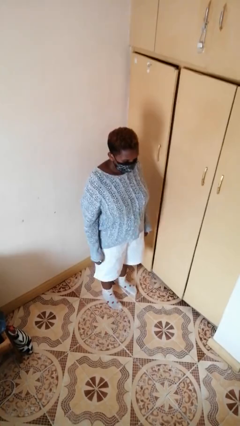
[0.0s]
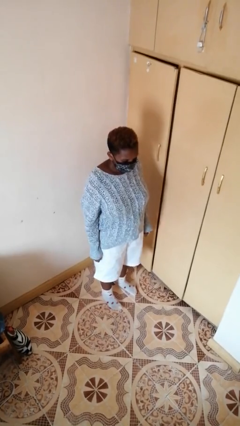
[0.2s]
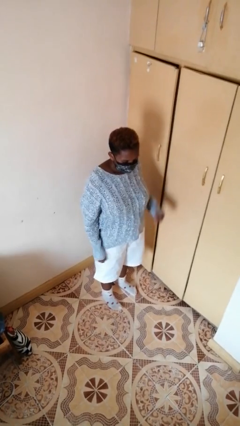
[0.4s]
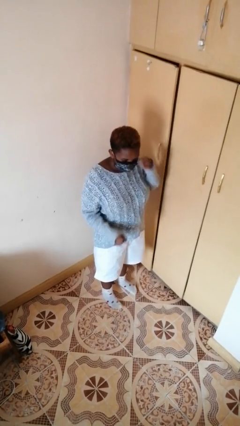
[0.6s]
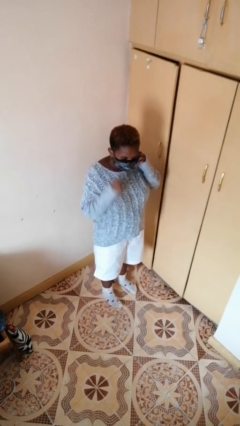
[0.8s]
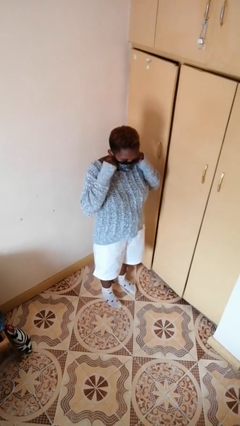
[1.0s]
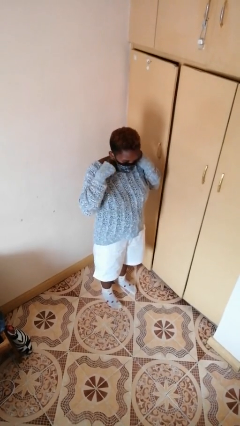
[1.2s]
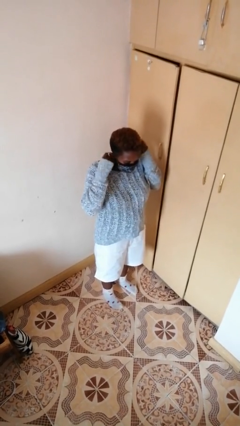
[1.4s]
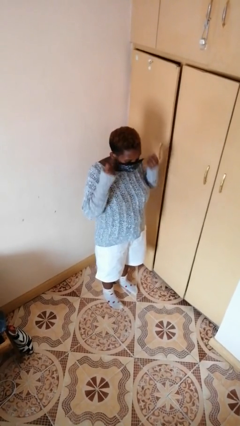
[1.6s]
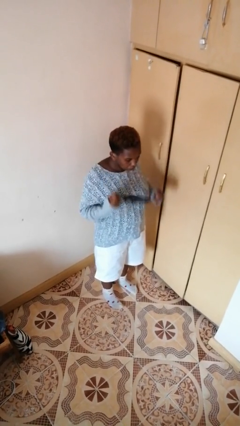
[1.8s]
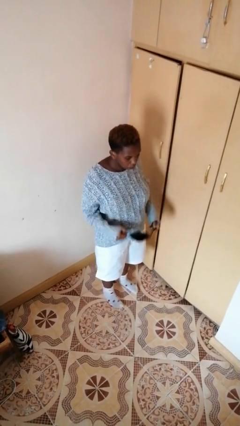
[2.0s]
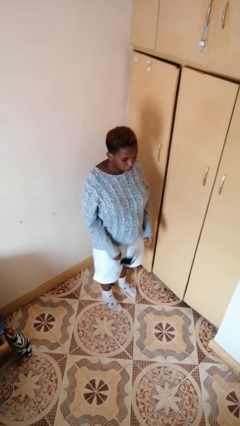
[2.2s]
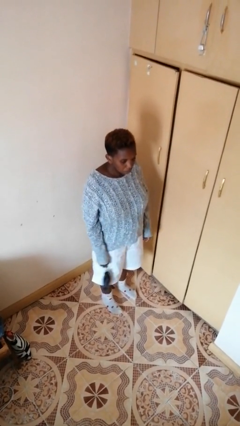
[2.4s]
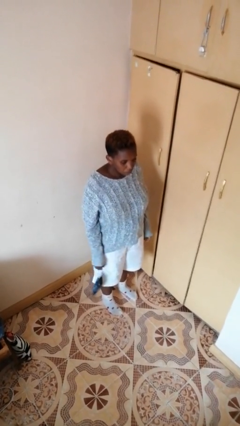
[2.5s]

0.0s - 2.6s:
person takes off facemask

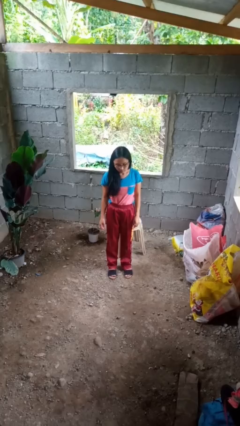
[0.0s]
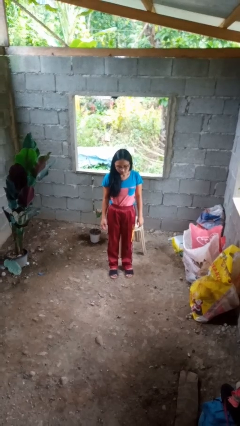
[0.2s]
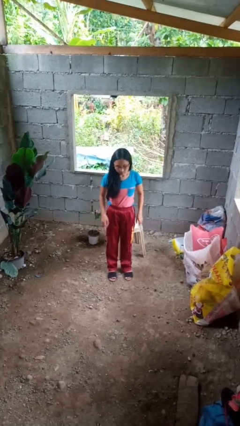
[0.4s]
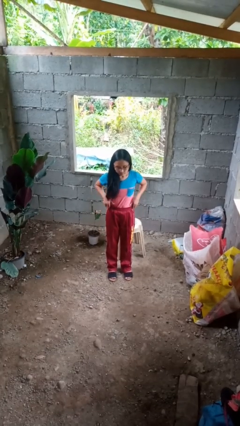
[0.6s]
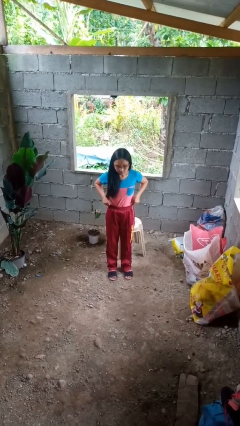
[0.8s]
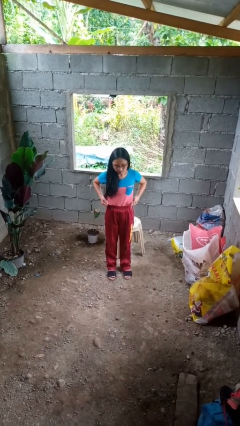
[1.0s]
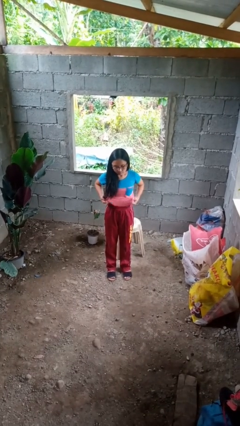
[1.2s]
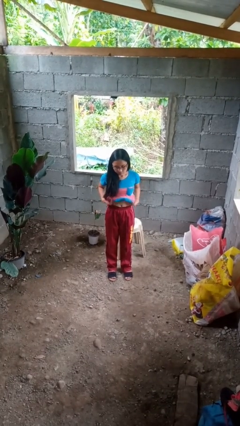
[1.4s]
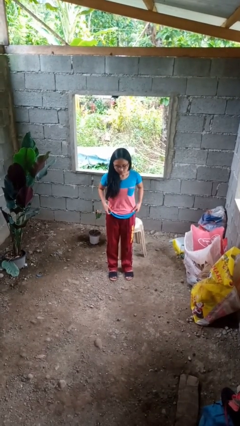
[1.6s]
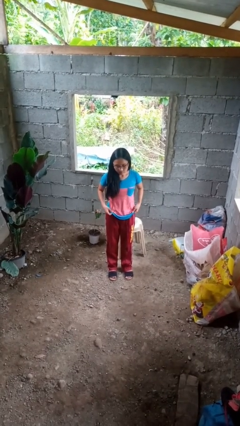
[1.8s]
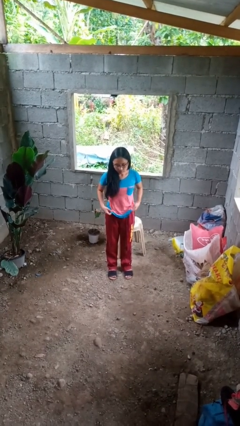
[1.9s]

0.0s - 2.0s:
person untucks shirt

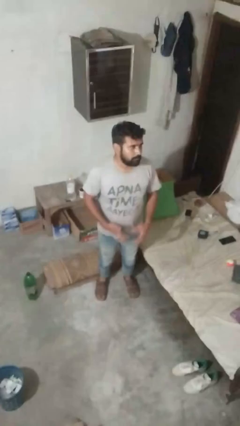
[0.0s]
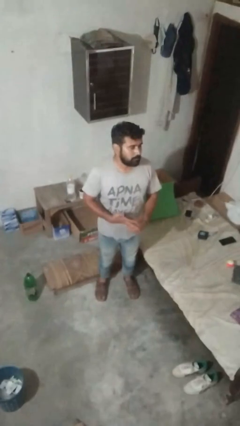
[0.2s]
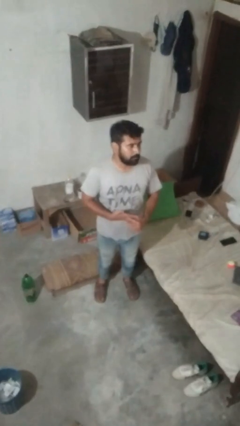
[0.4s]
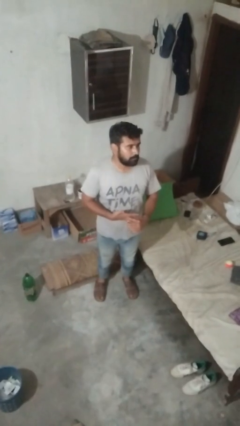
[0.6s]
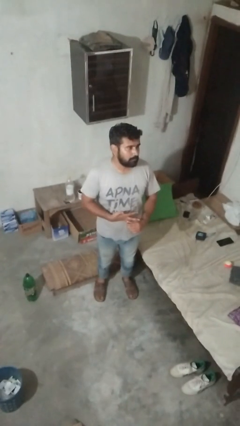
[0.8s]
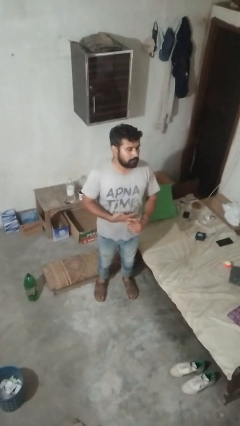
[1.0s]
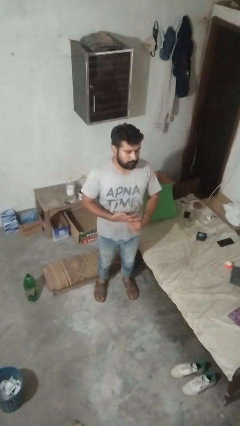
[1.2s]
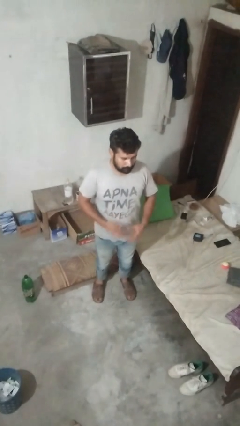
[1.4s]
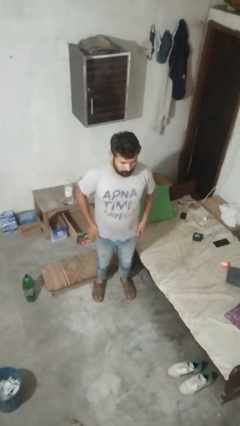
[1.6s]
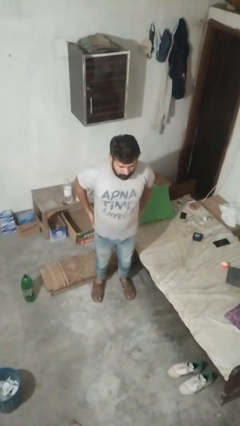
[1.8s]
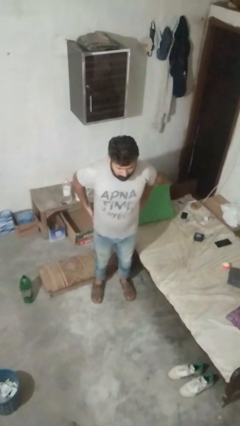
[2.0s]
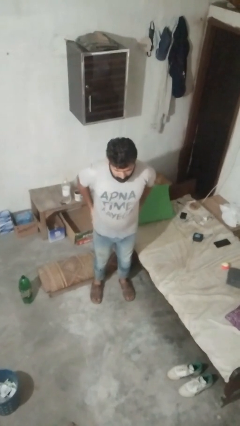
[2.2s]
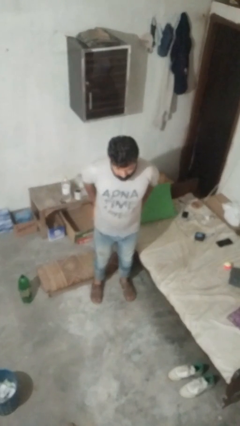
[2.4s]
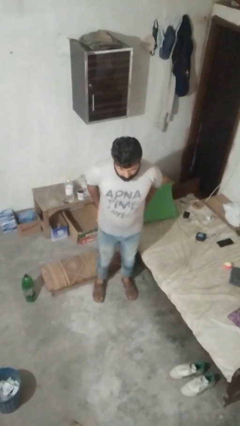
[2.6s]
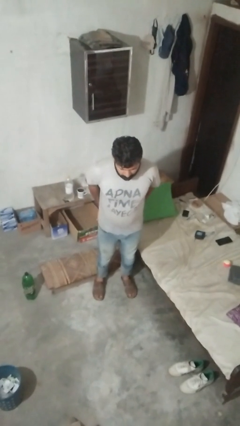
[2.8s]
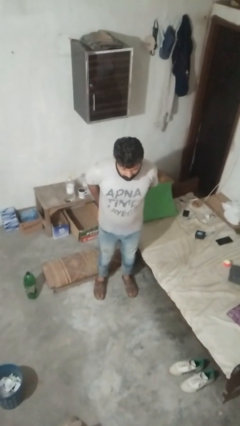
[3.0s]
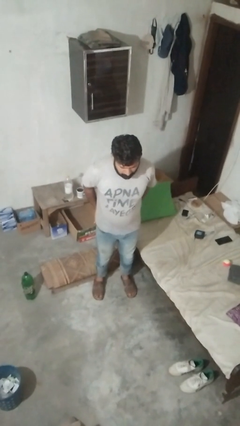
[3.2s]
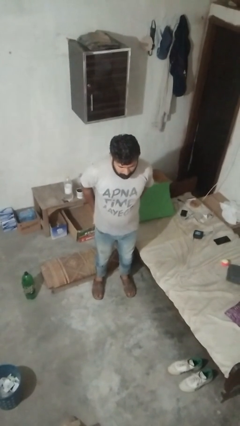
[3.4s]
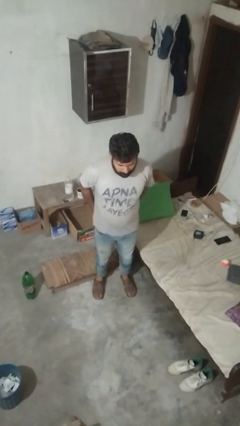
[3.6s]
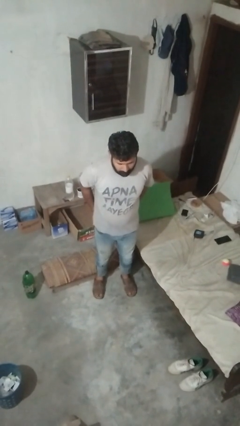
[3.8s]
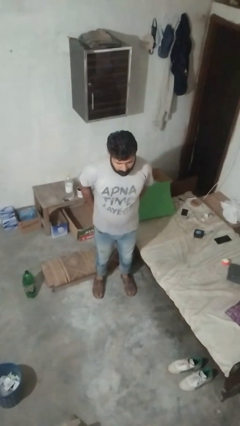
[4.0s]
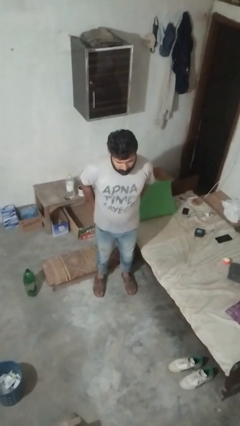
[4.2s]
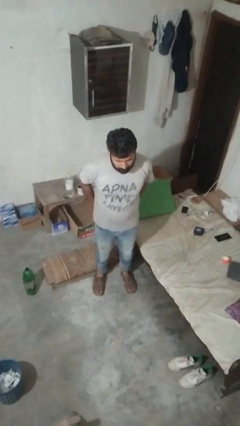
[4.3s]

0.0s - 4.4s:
person puts hands in back pockets

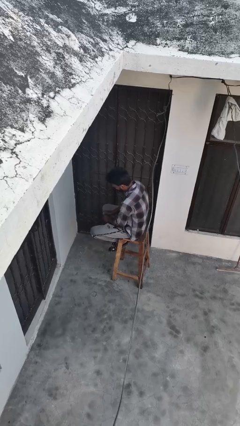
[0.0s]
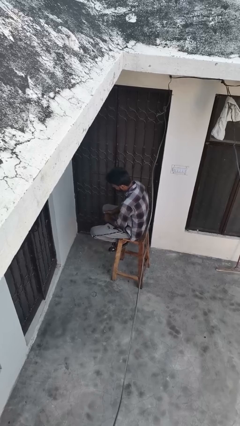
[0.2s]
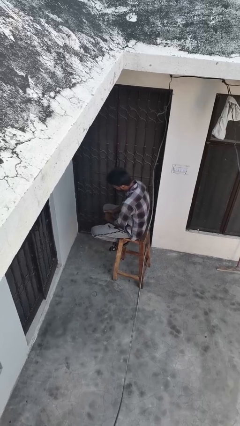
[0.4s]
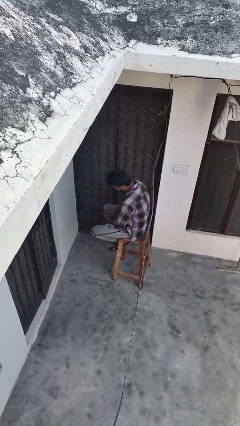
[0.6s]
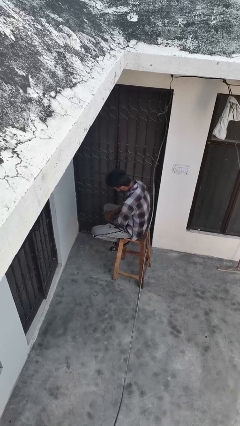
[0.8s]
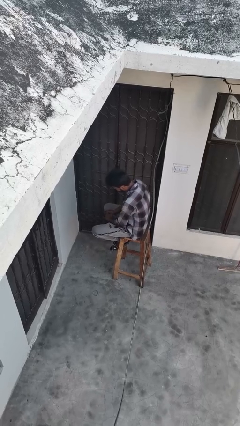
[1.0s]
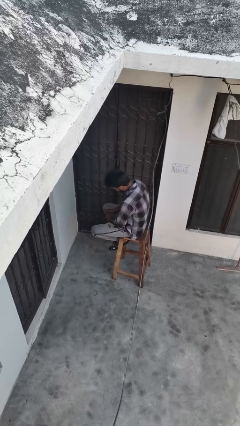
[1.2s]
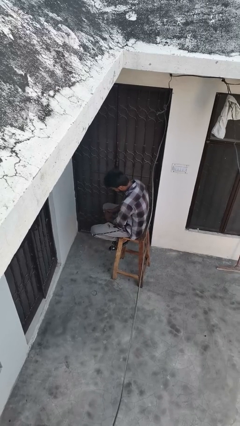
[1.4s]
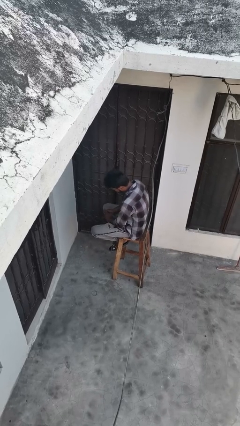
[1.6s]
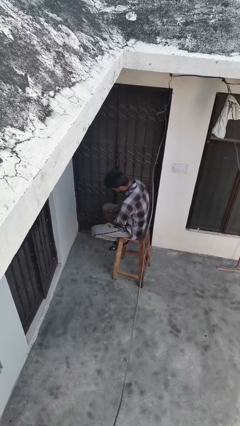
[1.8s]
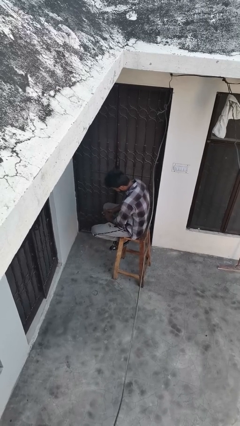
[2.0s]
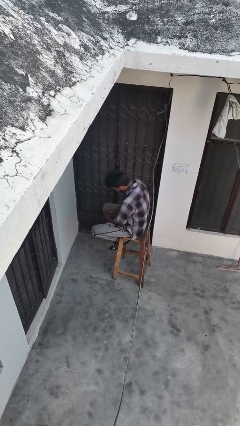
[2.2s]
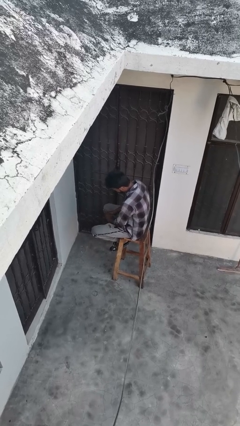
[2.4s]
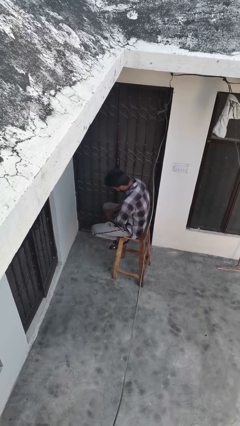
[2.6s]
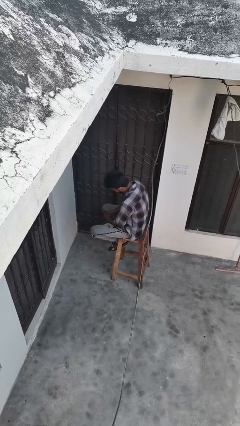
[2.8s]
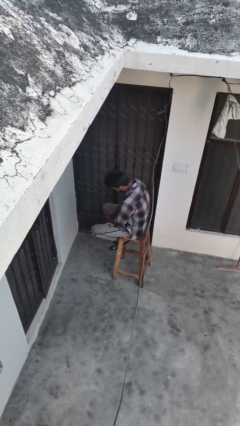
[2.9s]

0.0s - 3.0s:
person looks at hands in lap

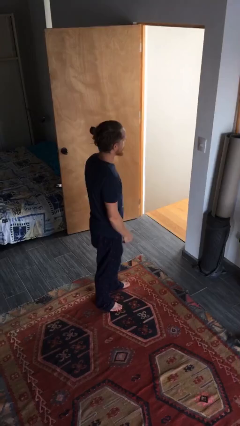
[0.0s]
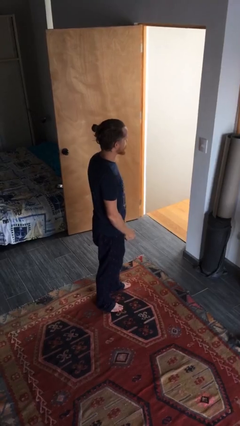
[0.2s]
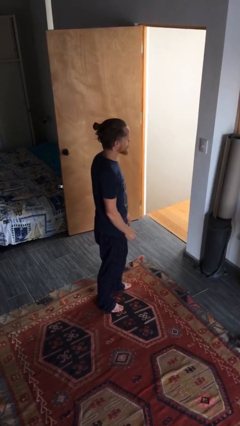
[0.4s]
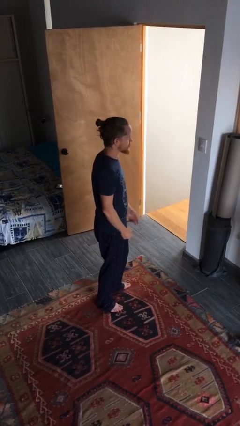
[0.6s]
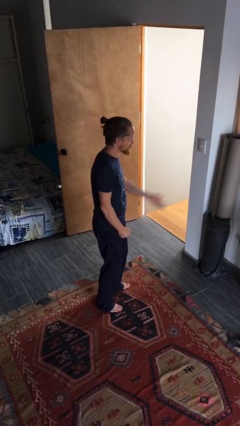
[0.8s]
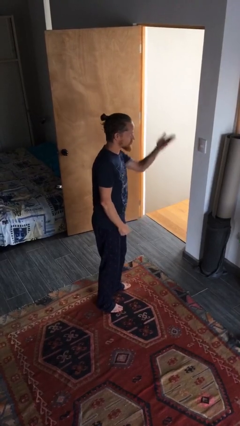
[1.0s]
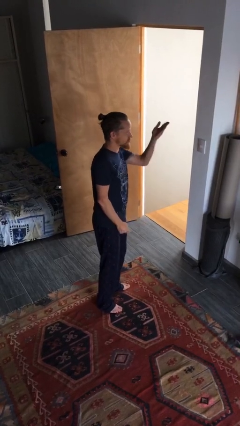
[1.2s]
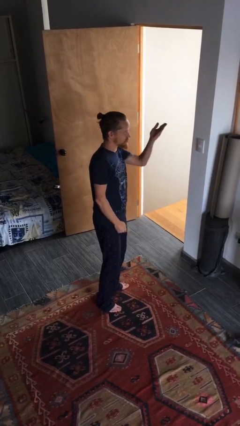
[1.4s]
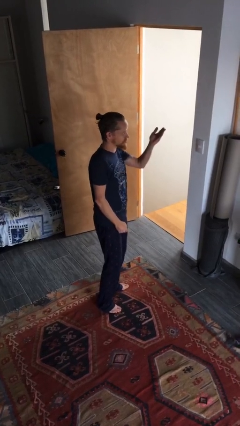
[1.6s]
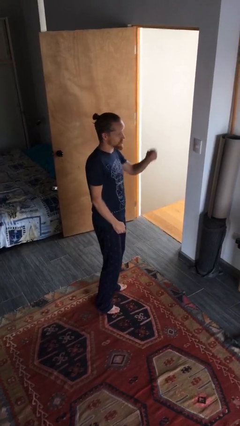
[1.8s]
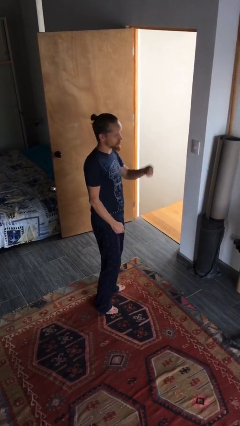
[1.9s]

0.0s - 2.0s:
person gestures swipe up

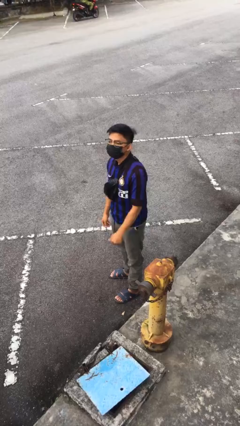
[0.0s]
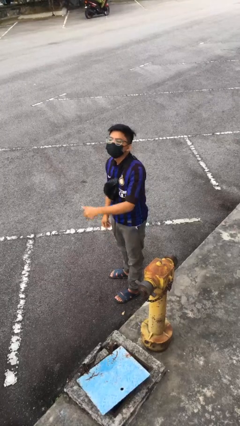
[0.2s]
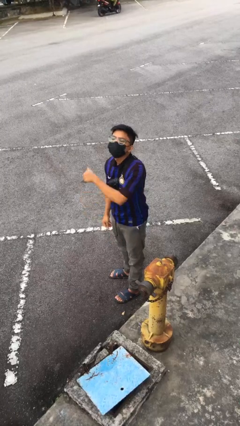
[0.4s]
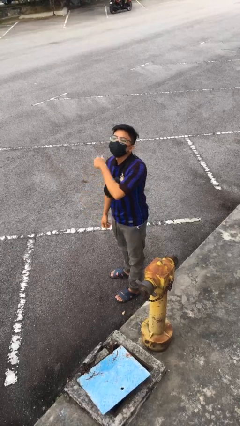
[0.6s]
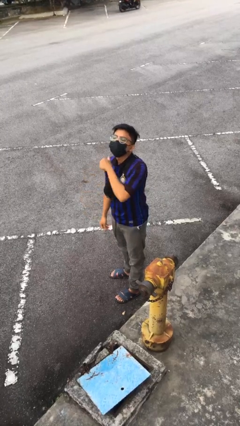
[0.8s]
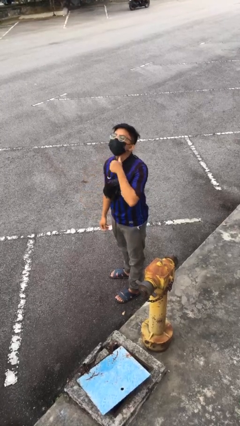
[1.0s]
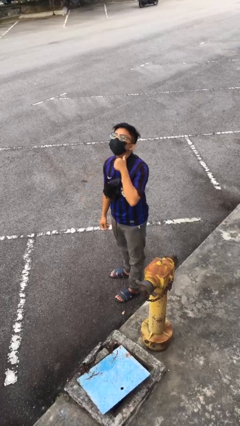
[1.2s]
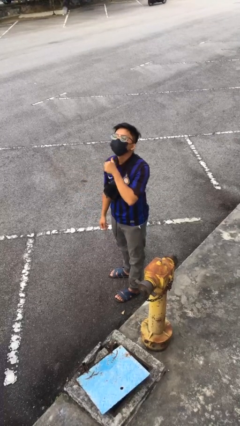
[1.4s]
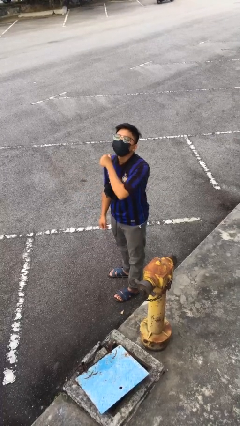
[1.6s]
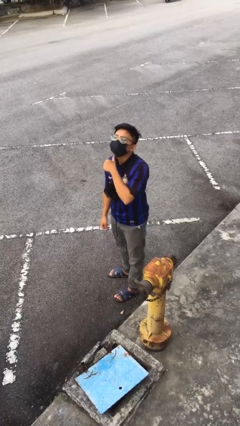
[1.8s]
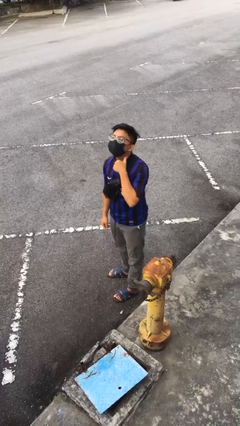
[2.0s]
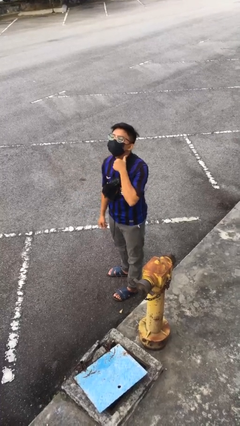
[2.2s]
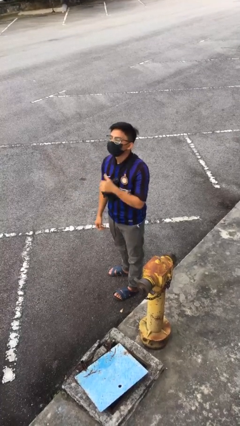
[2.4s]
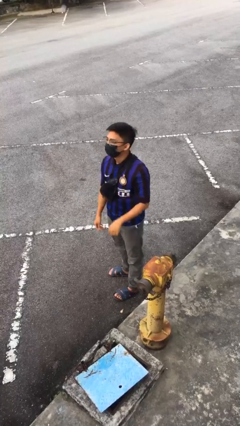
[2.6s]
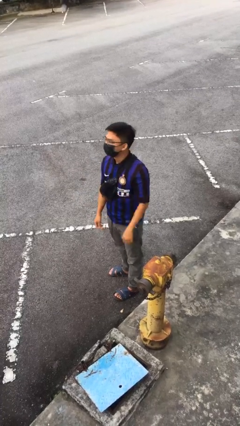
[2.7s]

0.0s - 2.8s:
person gestures cut

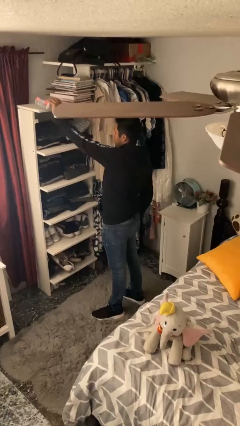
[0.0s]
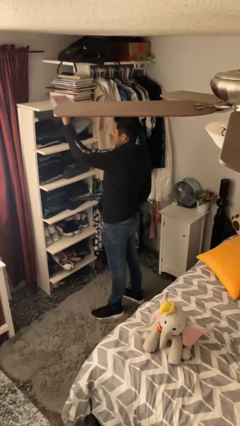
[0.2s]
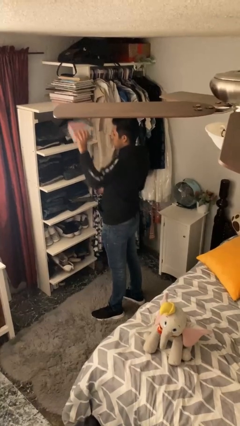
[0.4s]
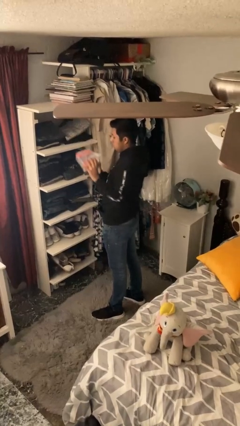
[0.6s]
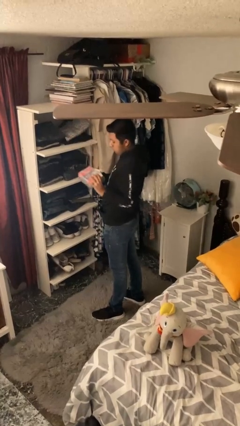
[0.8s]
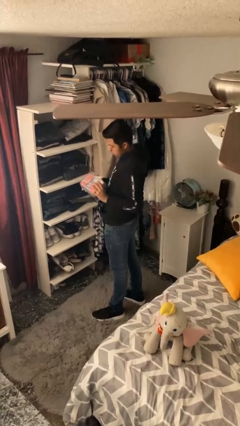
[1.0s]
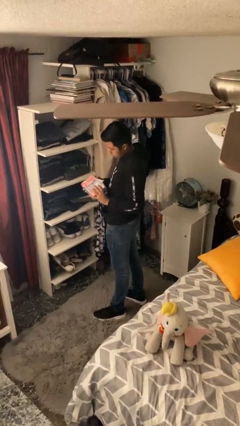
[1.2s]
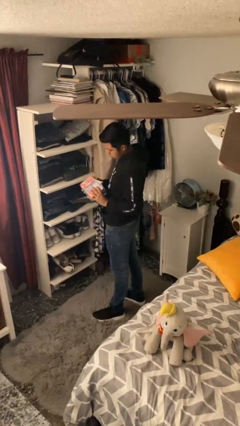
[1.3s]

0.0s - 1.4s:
person picks up object from shelf
